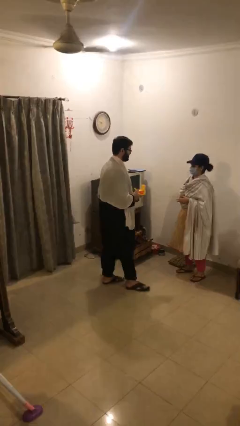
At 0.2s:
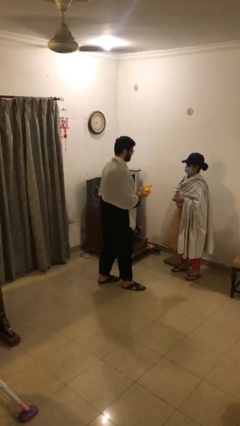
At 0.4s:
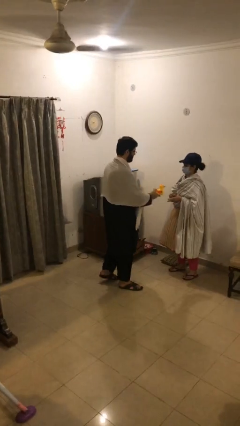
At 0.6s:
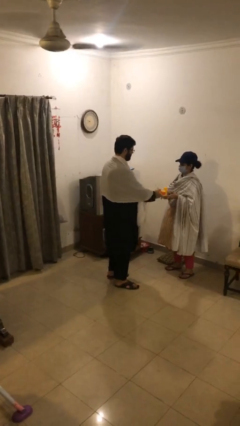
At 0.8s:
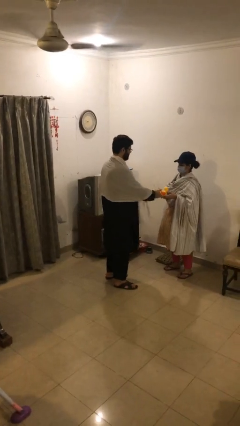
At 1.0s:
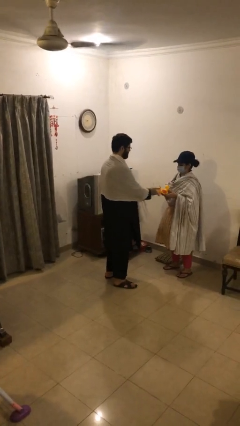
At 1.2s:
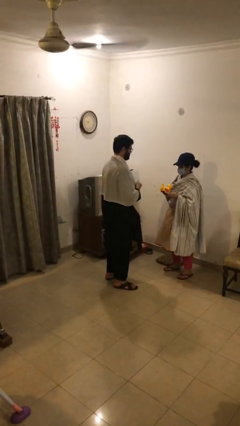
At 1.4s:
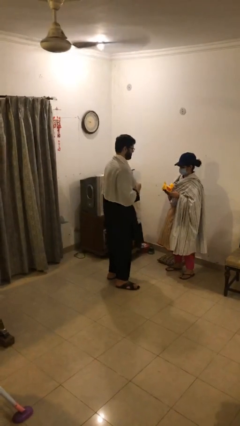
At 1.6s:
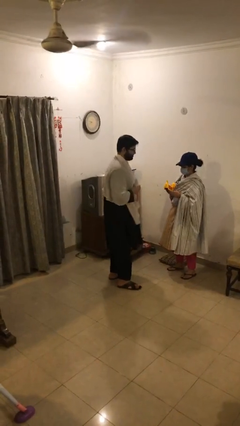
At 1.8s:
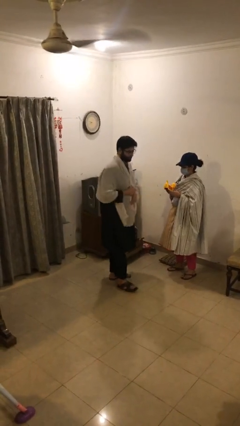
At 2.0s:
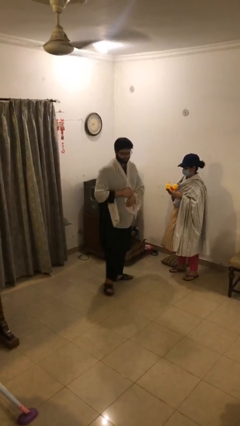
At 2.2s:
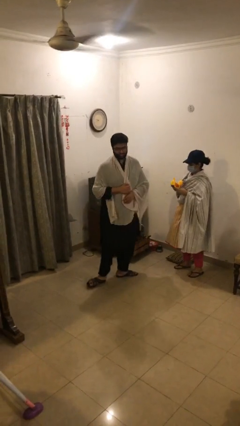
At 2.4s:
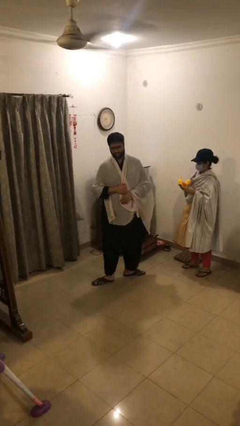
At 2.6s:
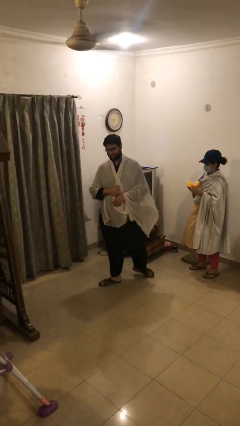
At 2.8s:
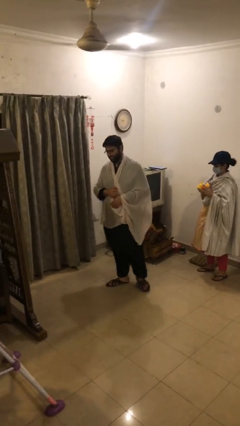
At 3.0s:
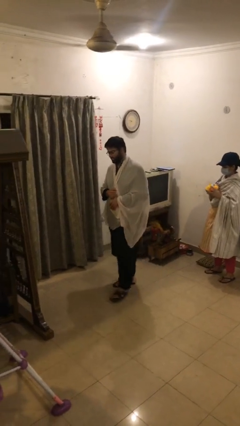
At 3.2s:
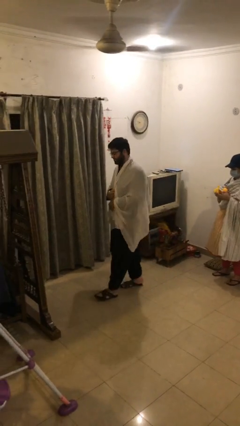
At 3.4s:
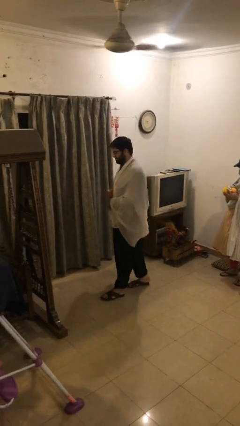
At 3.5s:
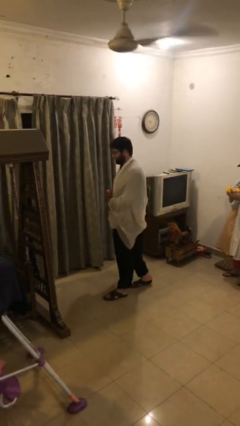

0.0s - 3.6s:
person transfers object to person

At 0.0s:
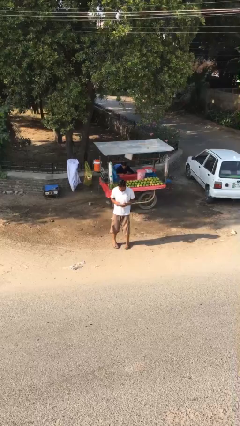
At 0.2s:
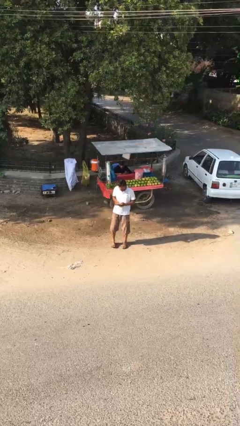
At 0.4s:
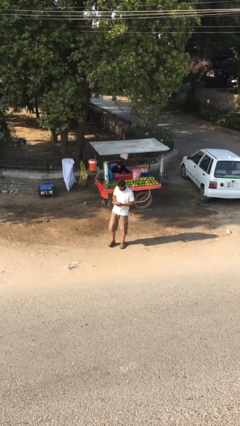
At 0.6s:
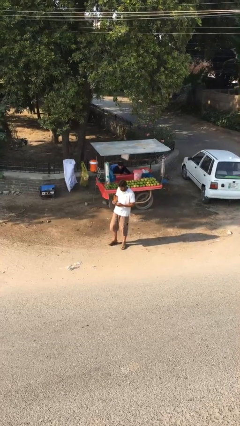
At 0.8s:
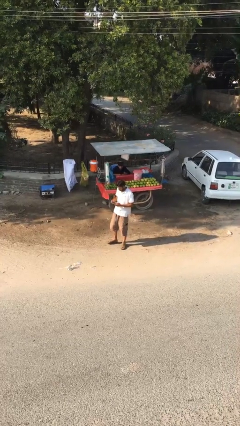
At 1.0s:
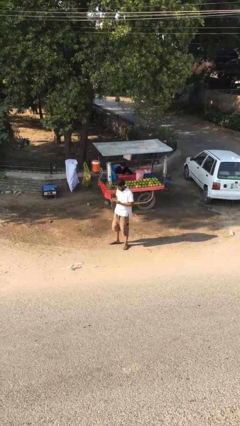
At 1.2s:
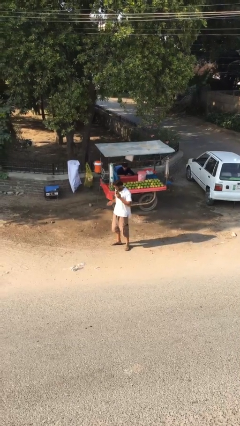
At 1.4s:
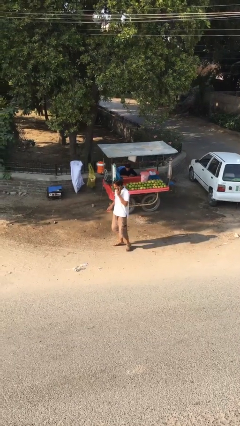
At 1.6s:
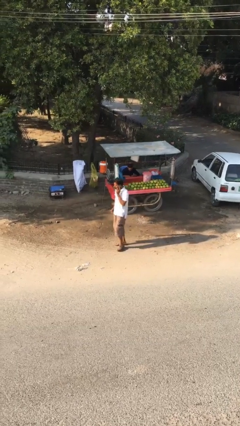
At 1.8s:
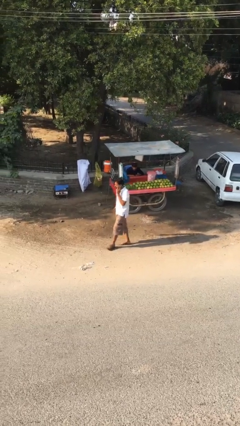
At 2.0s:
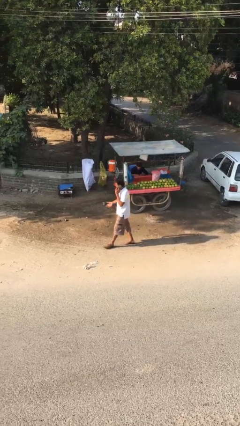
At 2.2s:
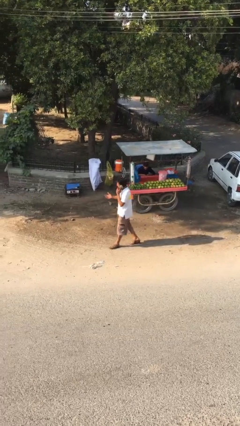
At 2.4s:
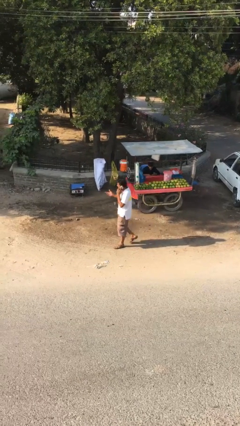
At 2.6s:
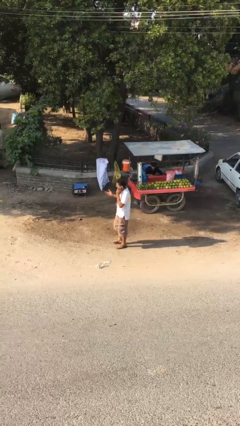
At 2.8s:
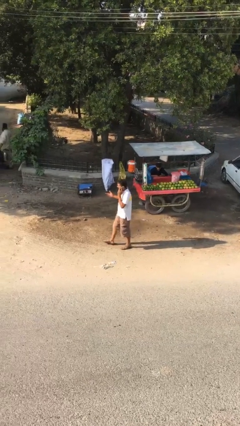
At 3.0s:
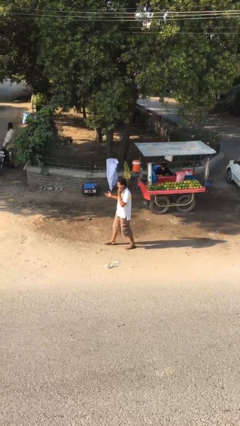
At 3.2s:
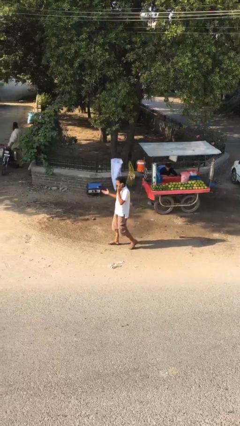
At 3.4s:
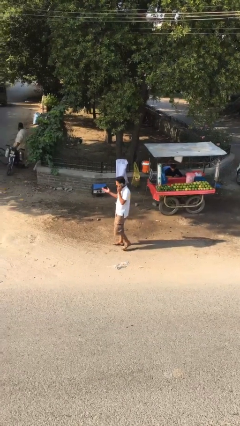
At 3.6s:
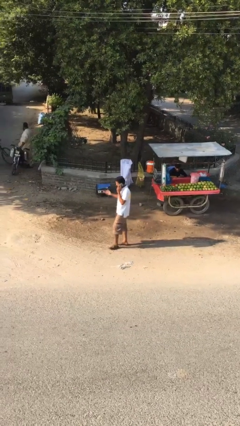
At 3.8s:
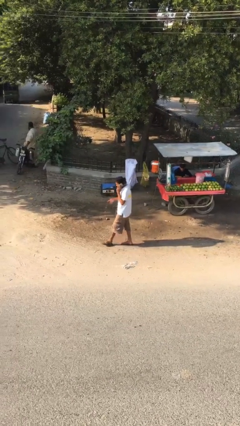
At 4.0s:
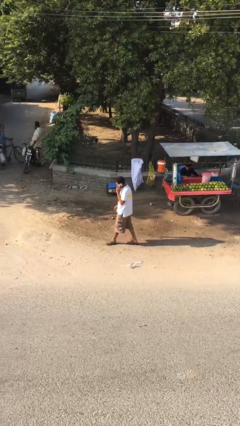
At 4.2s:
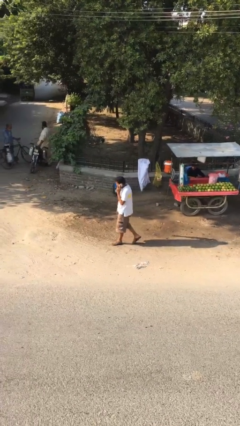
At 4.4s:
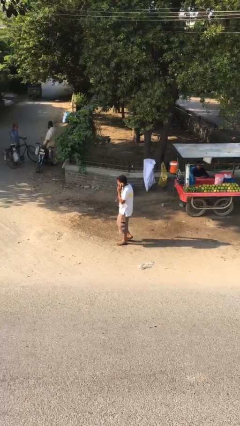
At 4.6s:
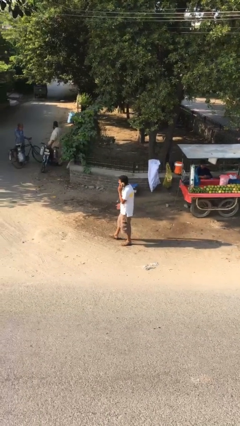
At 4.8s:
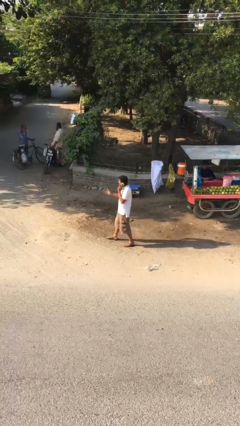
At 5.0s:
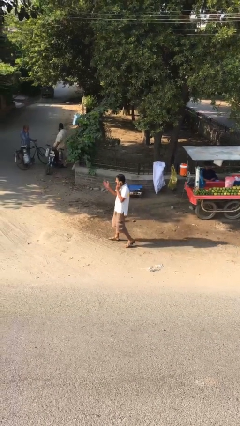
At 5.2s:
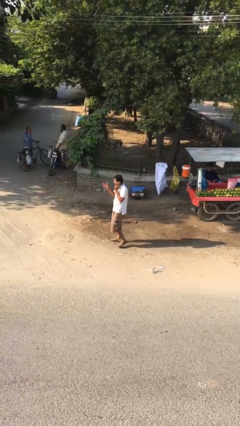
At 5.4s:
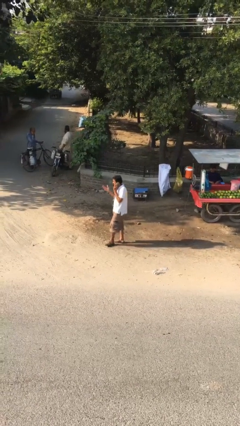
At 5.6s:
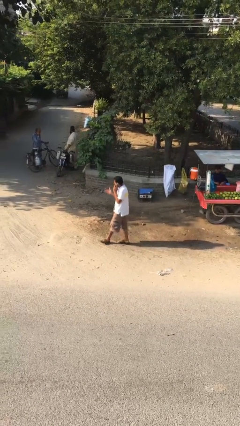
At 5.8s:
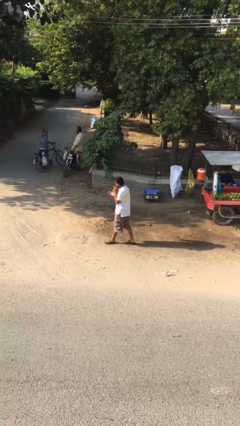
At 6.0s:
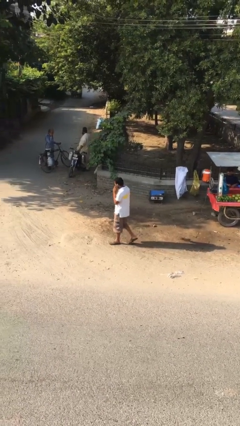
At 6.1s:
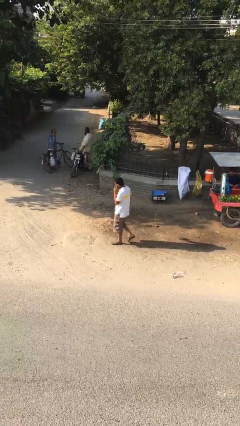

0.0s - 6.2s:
person talks on phone

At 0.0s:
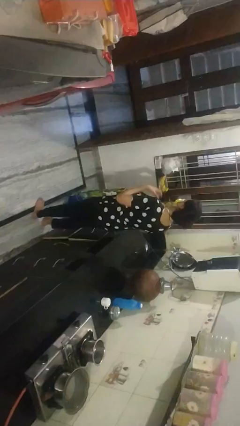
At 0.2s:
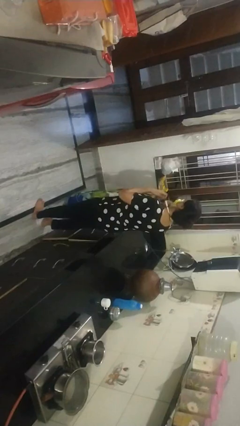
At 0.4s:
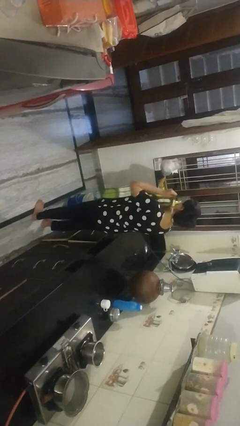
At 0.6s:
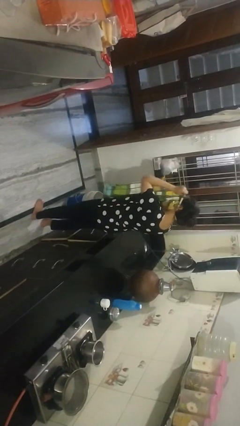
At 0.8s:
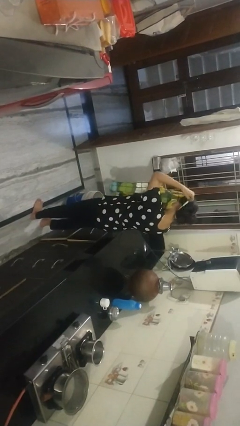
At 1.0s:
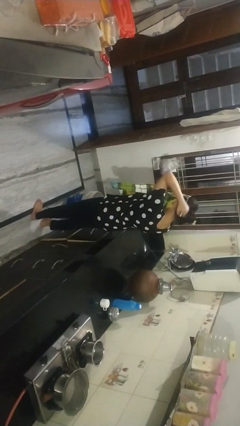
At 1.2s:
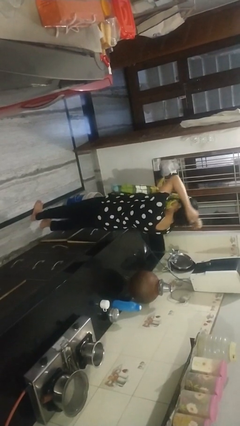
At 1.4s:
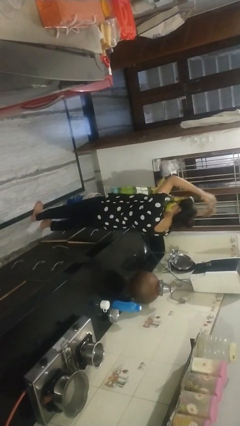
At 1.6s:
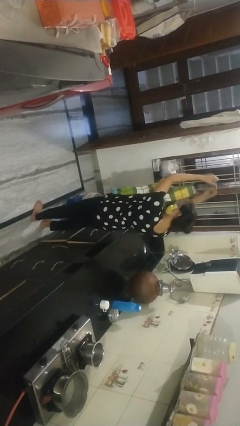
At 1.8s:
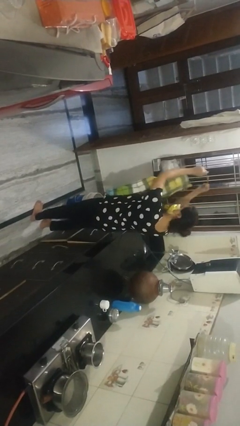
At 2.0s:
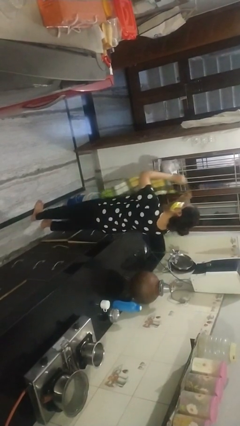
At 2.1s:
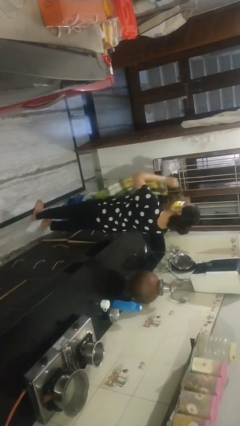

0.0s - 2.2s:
person takes off apron

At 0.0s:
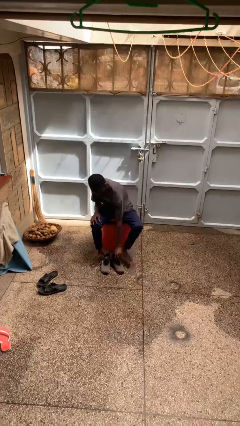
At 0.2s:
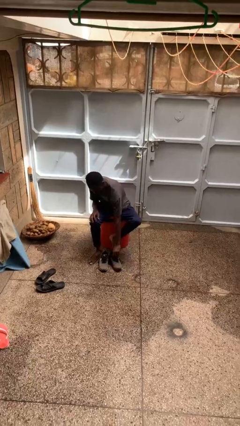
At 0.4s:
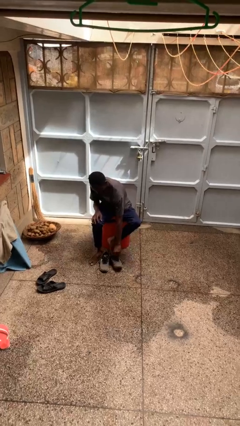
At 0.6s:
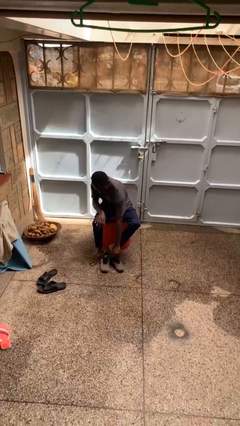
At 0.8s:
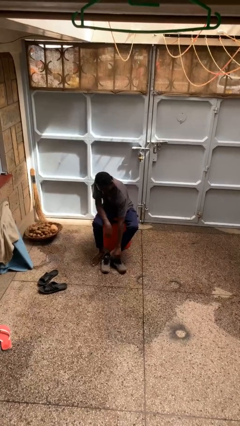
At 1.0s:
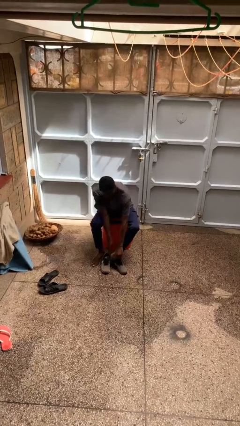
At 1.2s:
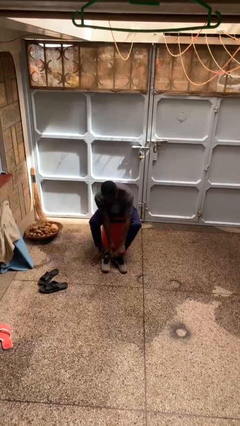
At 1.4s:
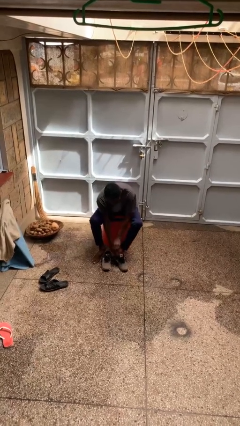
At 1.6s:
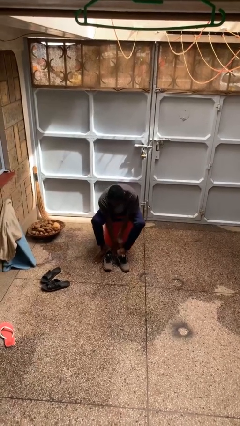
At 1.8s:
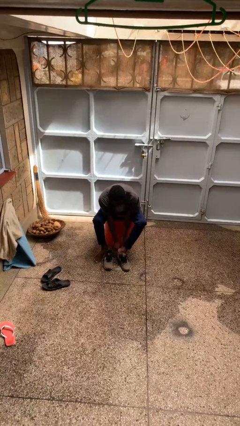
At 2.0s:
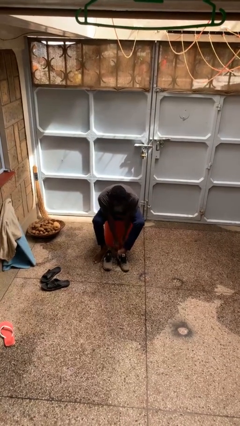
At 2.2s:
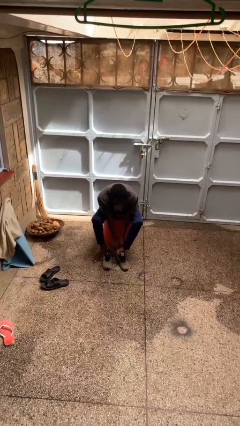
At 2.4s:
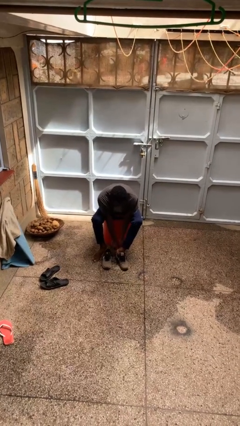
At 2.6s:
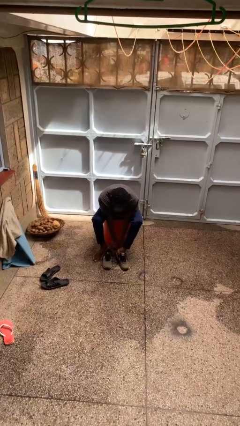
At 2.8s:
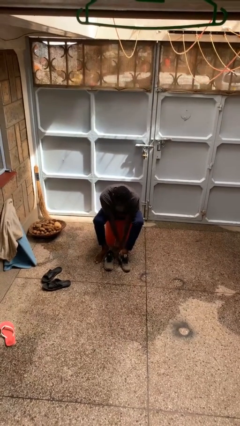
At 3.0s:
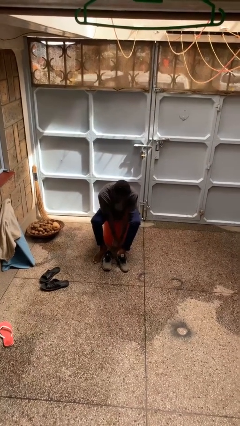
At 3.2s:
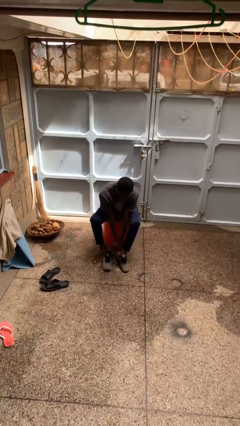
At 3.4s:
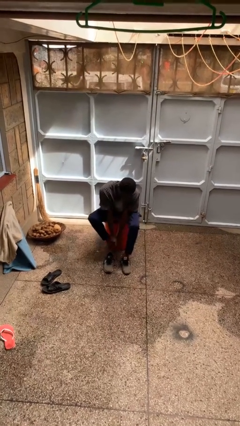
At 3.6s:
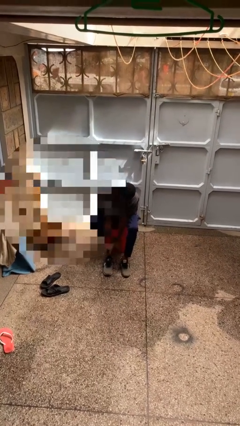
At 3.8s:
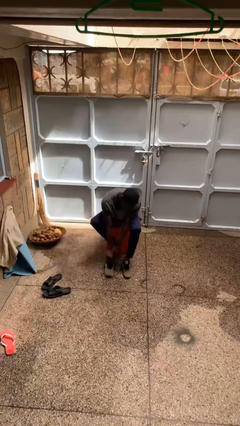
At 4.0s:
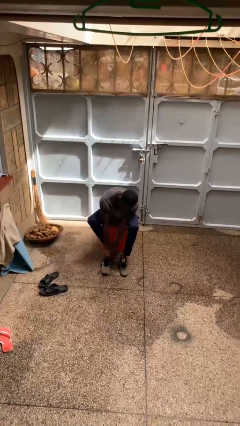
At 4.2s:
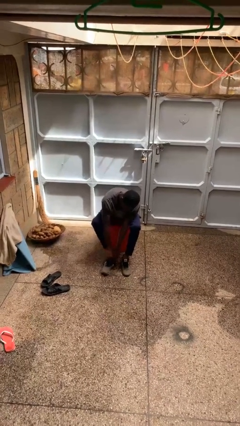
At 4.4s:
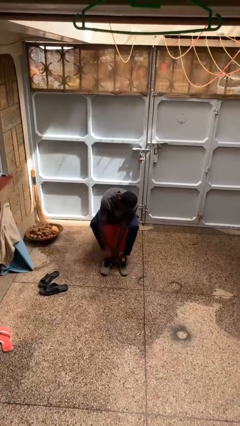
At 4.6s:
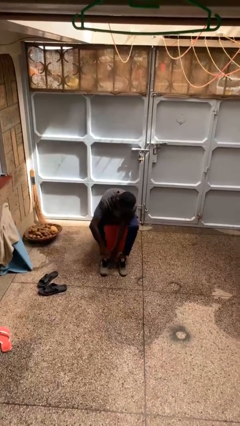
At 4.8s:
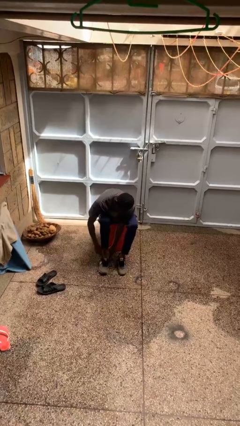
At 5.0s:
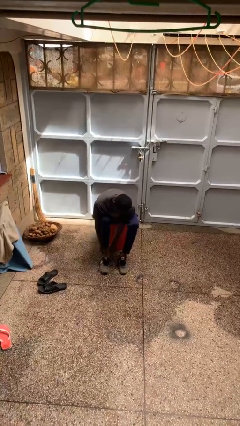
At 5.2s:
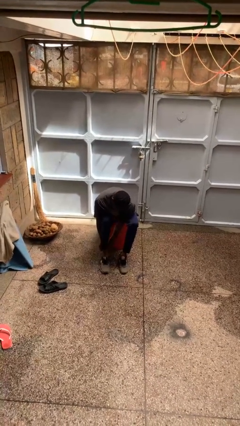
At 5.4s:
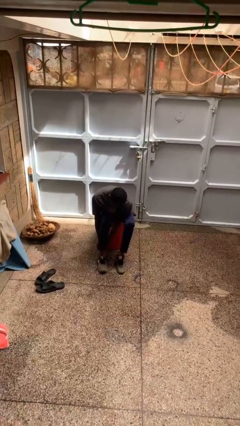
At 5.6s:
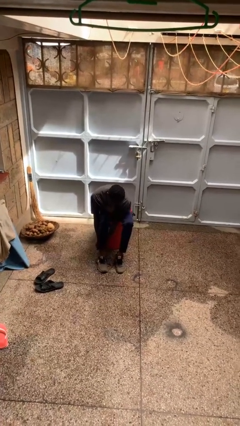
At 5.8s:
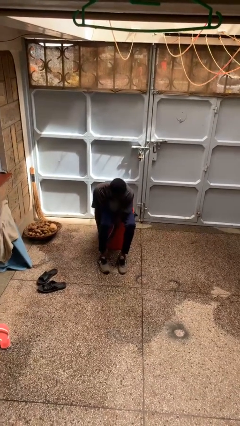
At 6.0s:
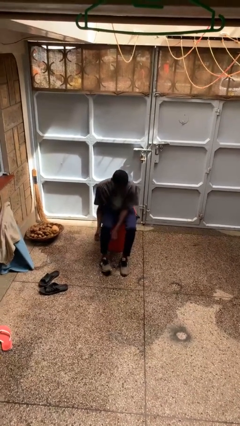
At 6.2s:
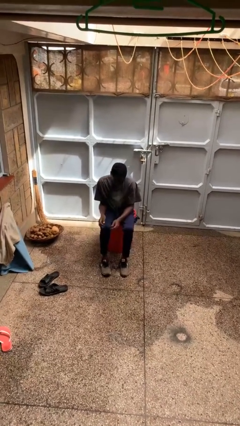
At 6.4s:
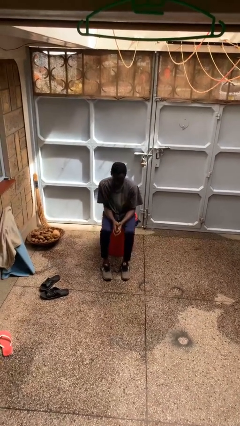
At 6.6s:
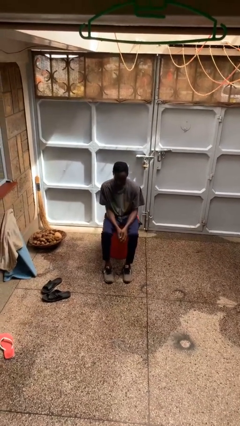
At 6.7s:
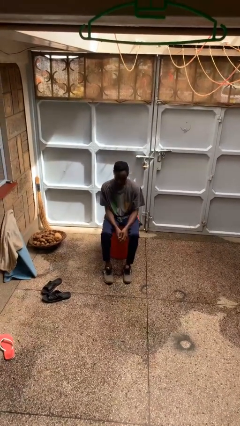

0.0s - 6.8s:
person puts on shoes
